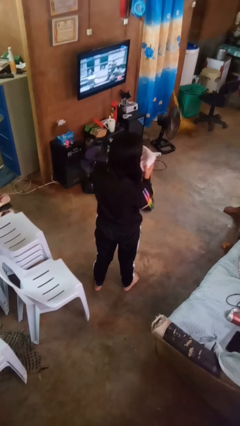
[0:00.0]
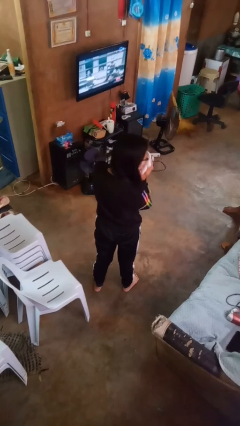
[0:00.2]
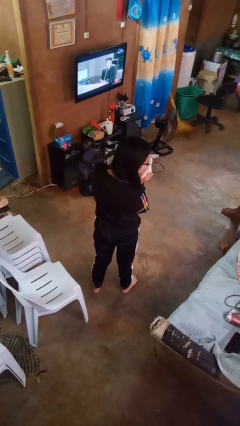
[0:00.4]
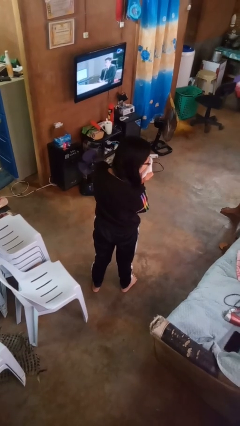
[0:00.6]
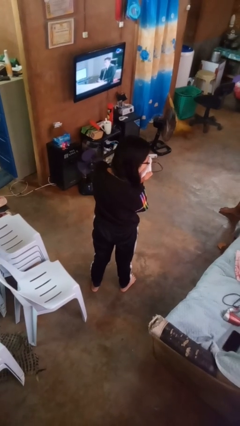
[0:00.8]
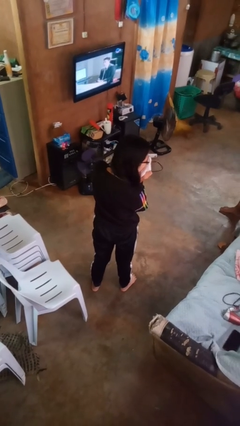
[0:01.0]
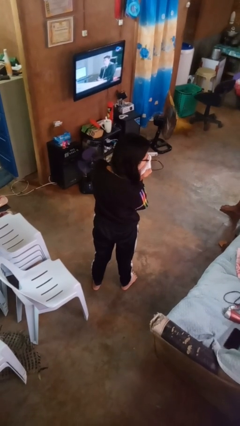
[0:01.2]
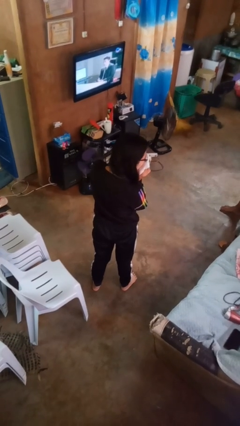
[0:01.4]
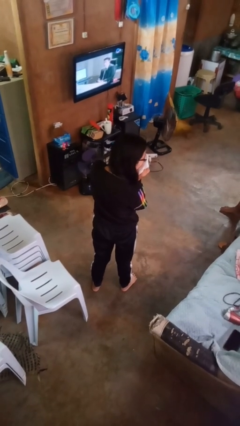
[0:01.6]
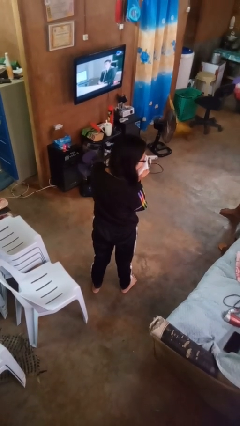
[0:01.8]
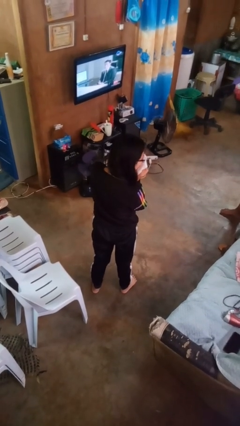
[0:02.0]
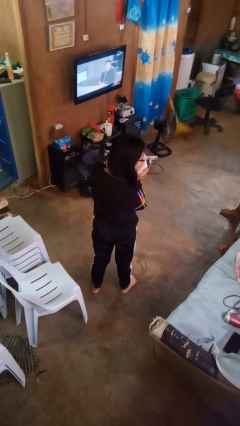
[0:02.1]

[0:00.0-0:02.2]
person blows nose

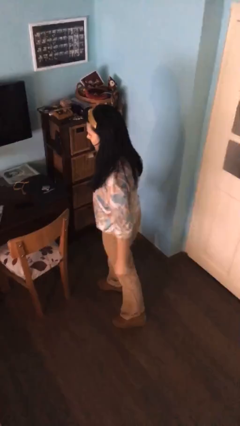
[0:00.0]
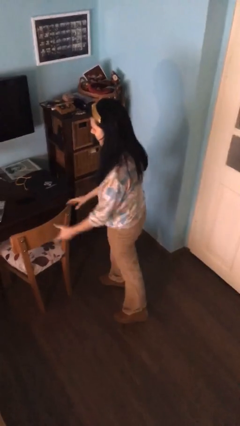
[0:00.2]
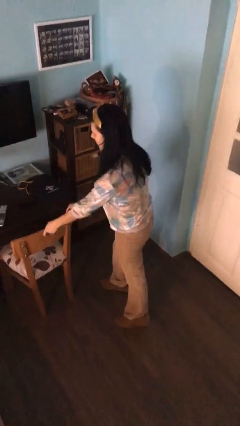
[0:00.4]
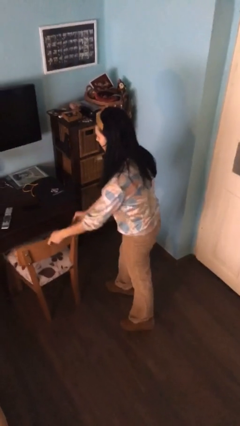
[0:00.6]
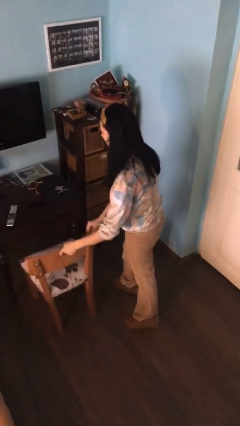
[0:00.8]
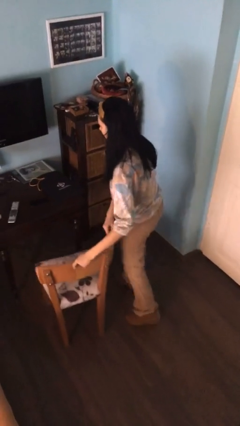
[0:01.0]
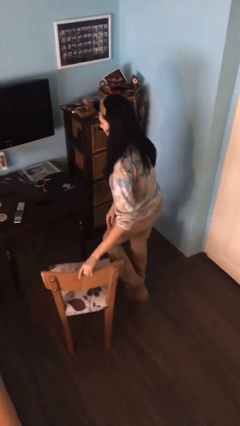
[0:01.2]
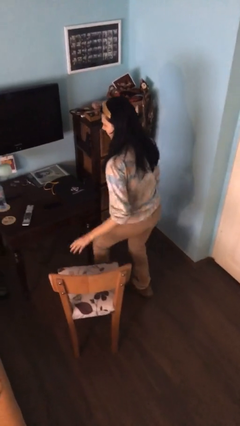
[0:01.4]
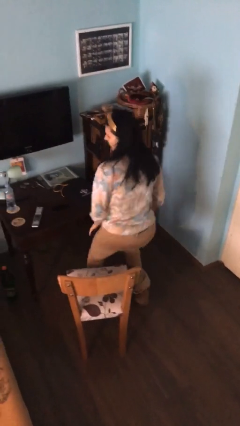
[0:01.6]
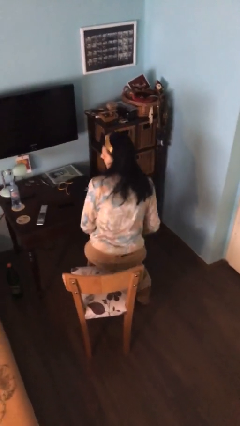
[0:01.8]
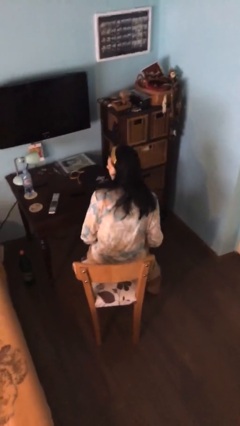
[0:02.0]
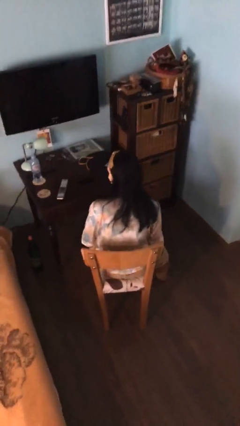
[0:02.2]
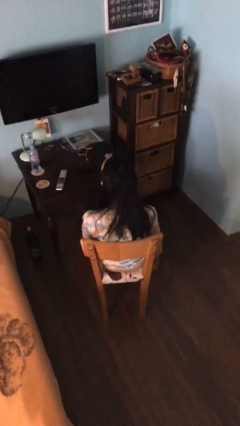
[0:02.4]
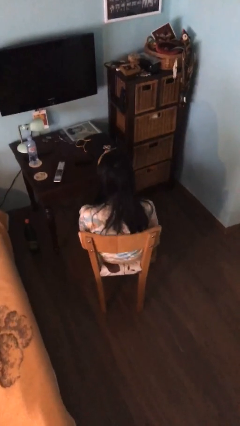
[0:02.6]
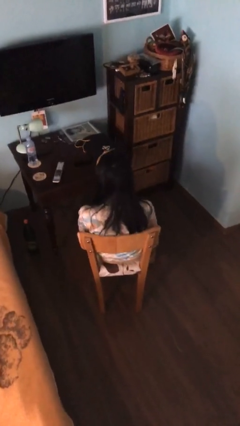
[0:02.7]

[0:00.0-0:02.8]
person sits down

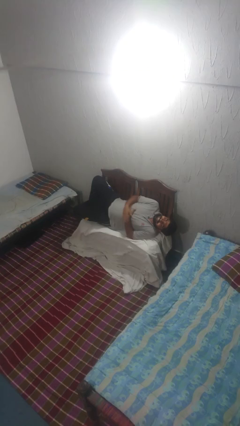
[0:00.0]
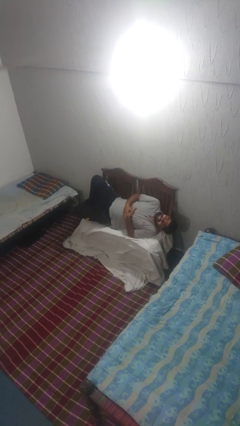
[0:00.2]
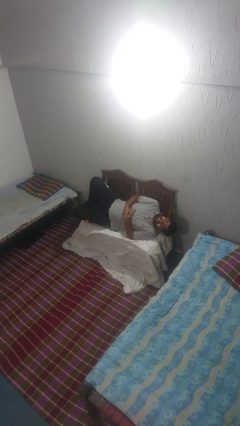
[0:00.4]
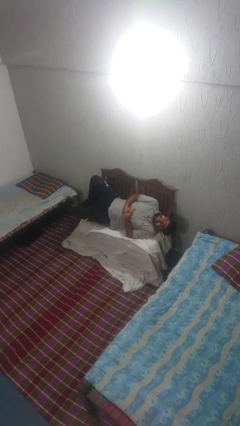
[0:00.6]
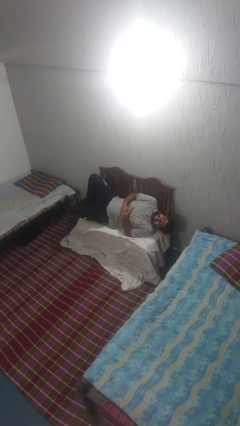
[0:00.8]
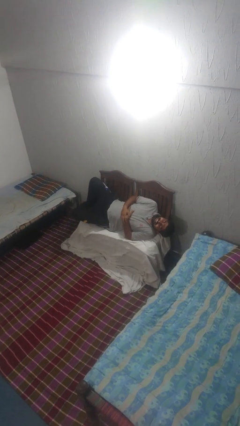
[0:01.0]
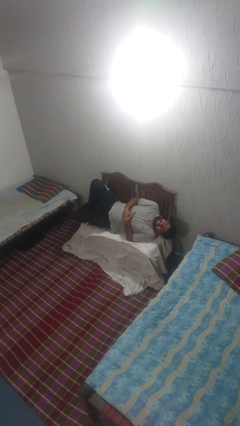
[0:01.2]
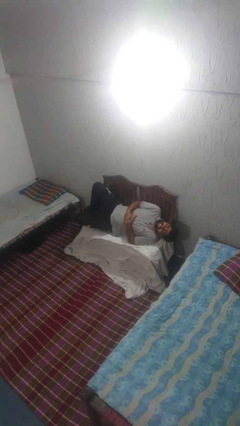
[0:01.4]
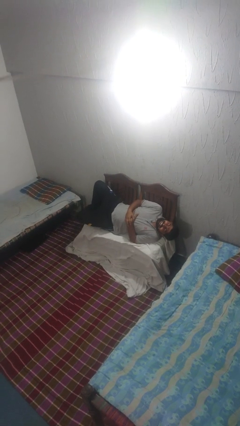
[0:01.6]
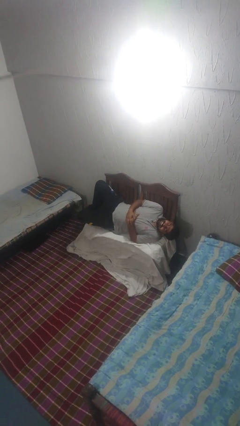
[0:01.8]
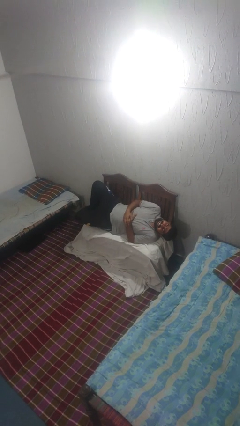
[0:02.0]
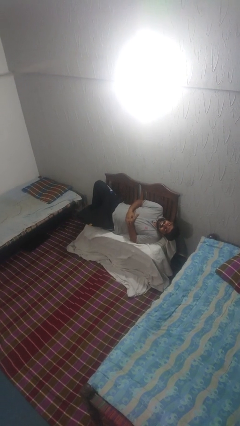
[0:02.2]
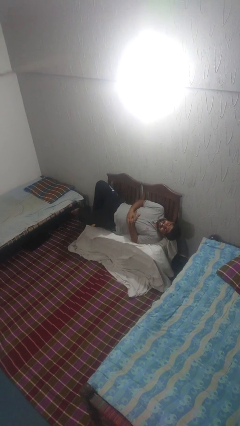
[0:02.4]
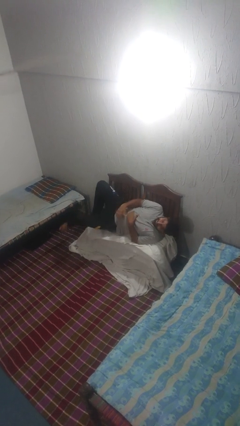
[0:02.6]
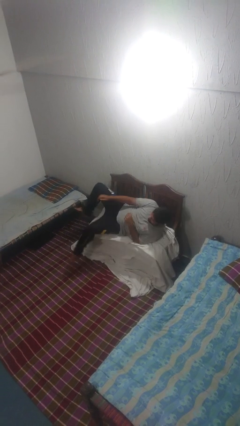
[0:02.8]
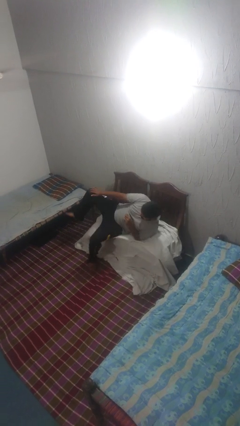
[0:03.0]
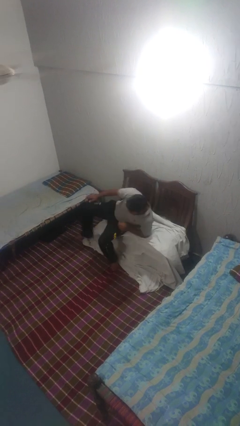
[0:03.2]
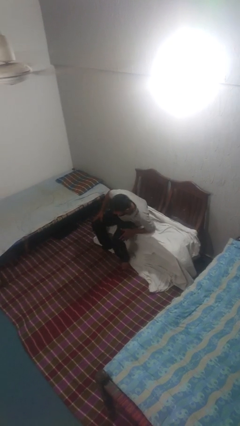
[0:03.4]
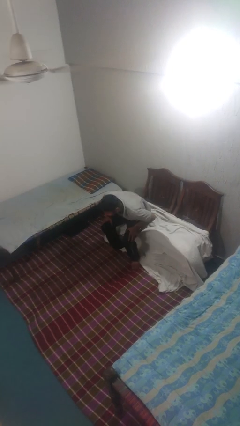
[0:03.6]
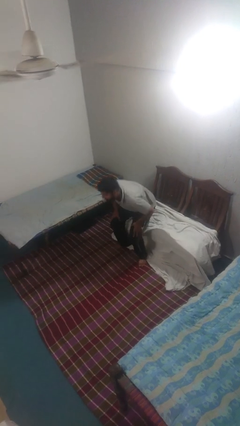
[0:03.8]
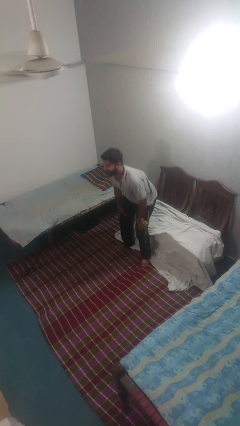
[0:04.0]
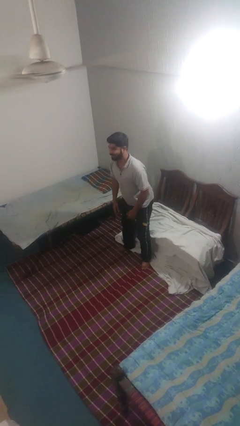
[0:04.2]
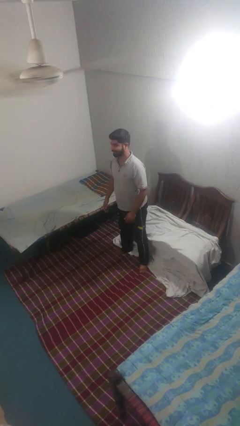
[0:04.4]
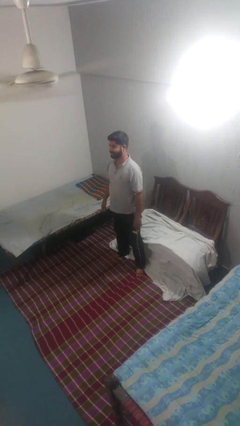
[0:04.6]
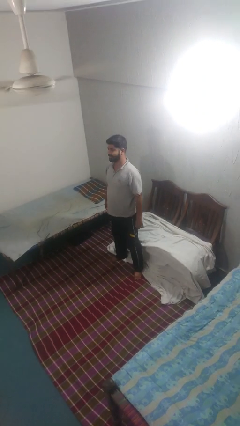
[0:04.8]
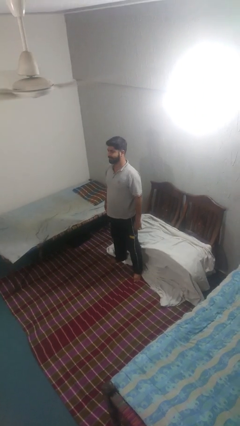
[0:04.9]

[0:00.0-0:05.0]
person stands up

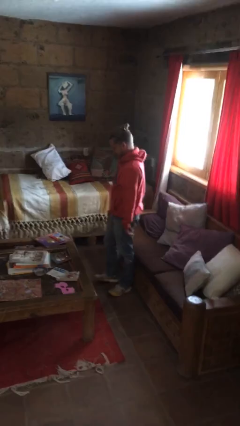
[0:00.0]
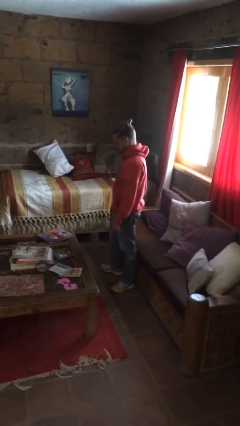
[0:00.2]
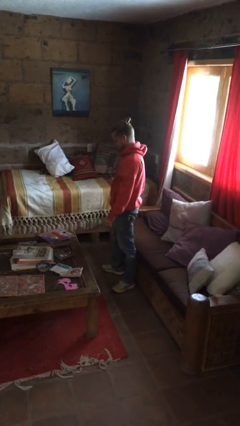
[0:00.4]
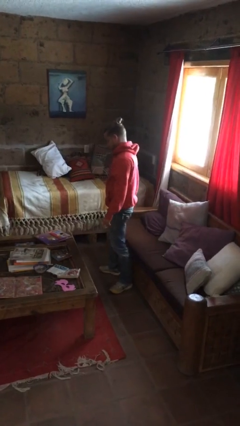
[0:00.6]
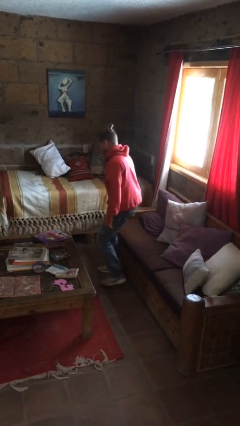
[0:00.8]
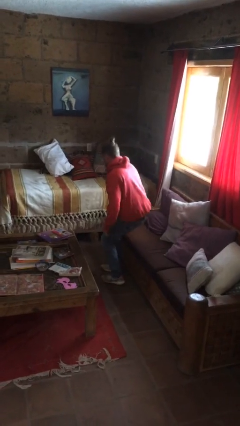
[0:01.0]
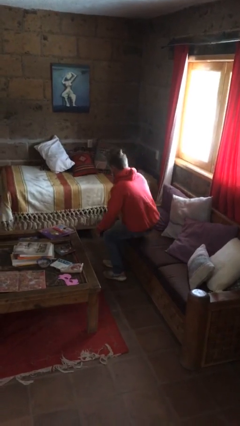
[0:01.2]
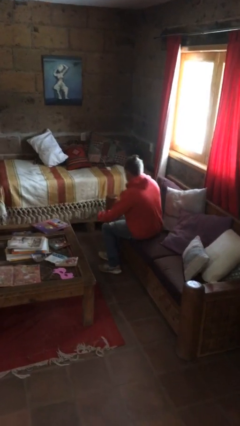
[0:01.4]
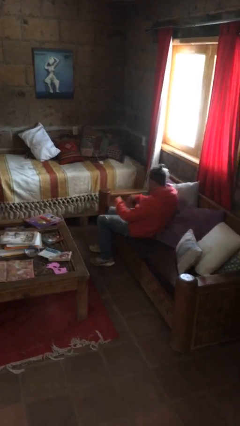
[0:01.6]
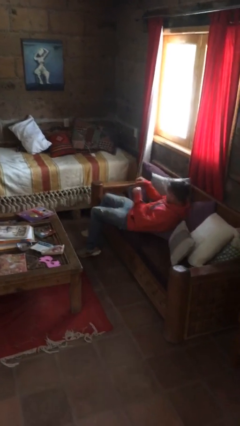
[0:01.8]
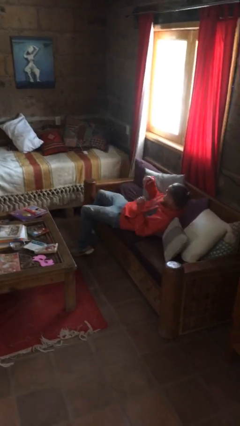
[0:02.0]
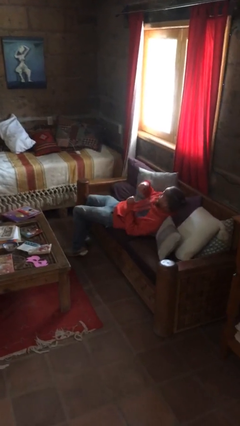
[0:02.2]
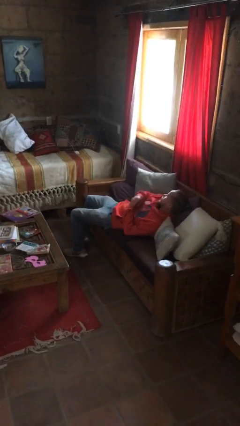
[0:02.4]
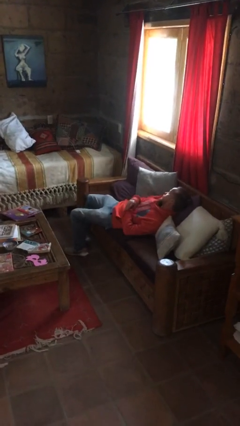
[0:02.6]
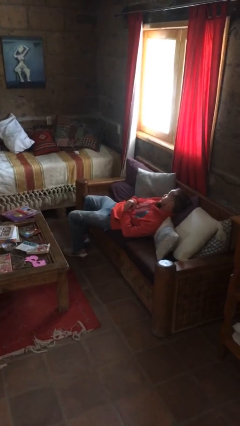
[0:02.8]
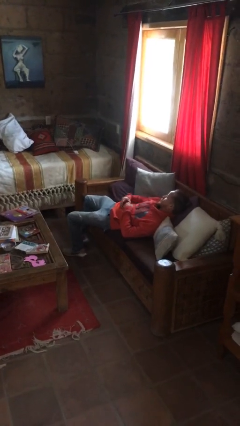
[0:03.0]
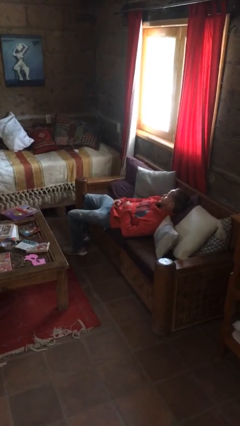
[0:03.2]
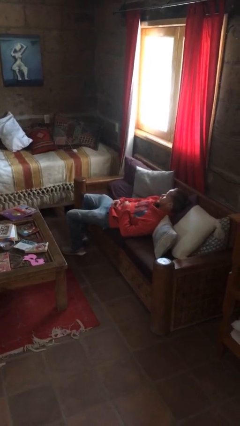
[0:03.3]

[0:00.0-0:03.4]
person lies down on couch

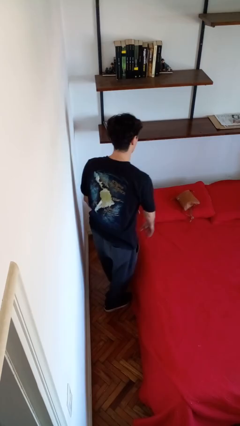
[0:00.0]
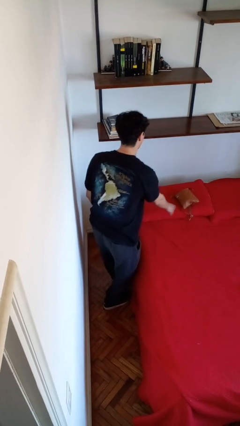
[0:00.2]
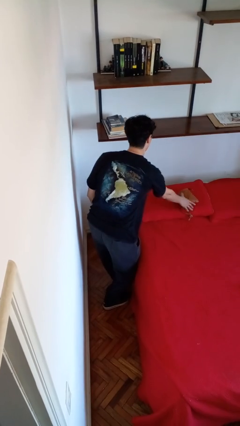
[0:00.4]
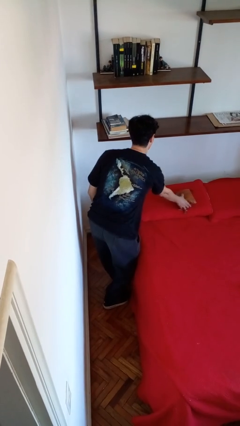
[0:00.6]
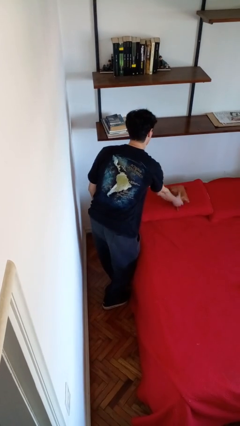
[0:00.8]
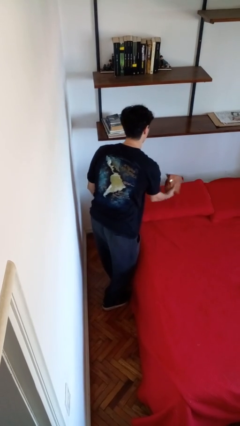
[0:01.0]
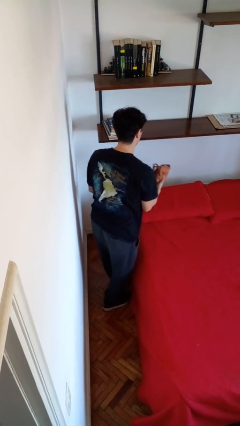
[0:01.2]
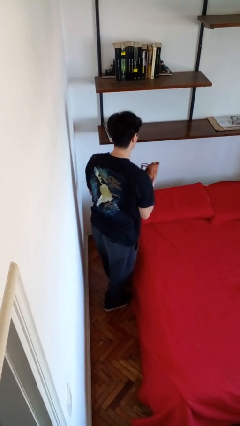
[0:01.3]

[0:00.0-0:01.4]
person picks up object from bed

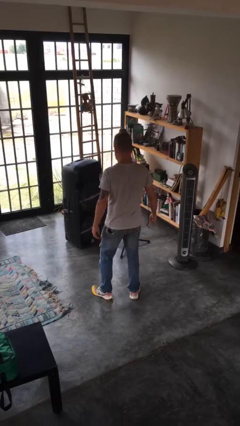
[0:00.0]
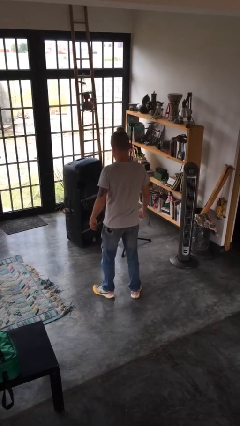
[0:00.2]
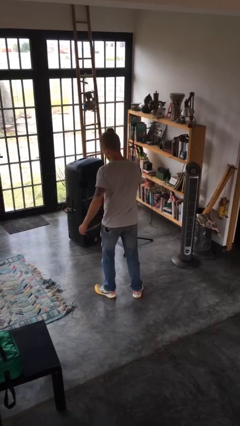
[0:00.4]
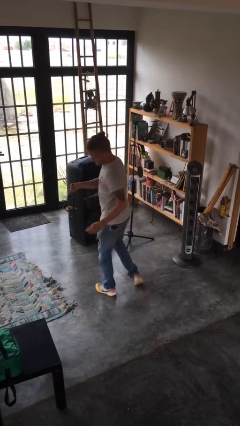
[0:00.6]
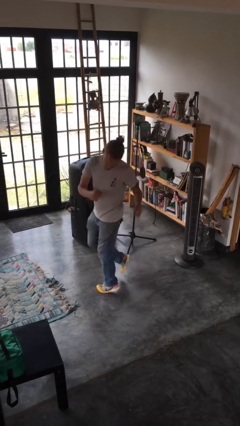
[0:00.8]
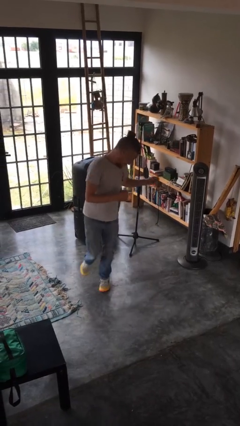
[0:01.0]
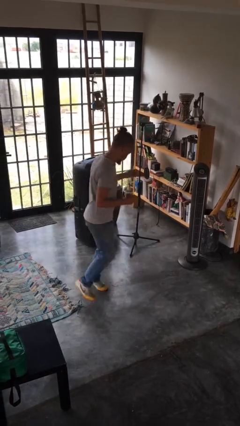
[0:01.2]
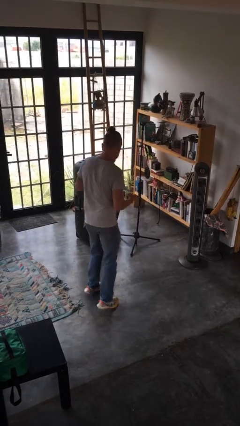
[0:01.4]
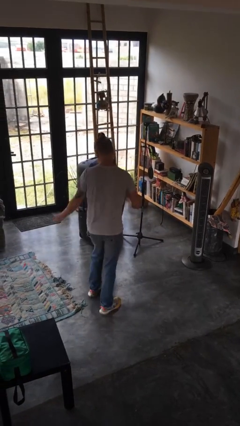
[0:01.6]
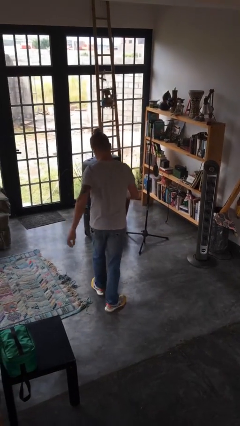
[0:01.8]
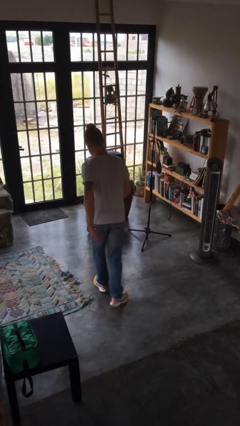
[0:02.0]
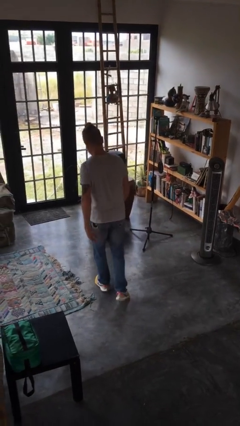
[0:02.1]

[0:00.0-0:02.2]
person twirls
